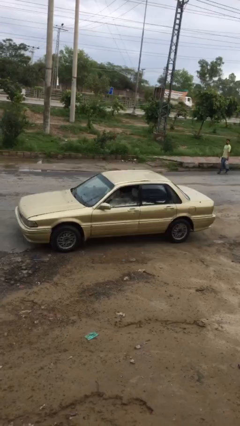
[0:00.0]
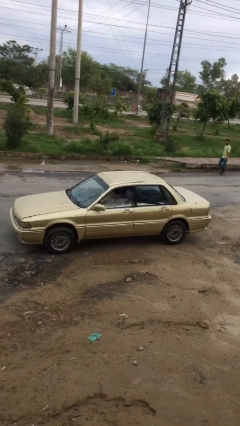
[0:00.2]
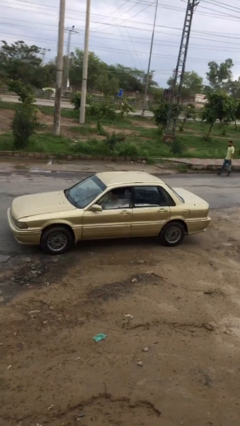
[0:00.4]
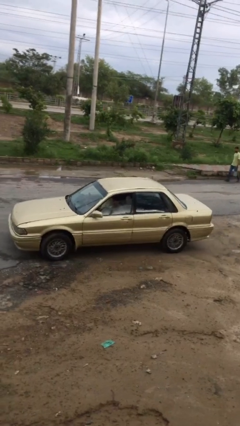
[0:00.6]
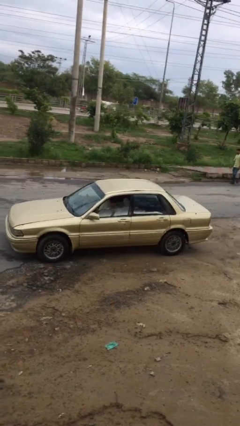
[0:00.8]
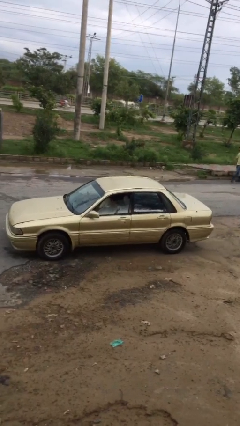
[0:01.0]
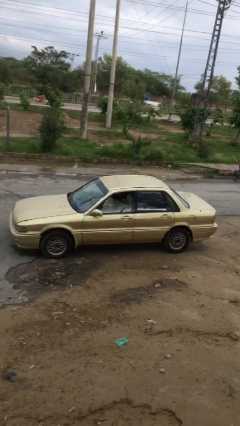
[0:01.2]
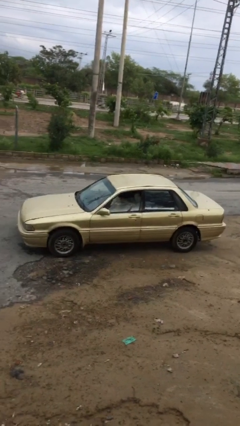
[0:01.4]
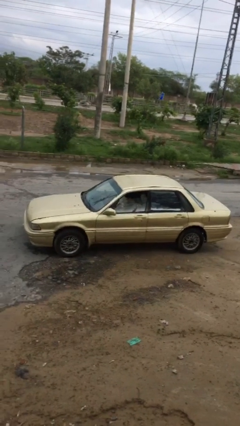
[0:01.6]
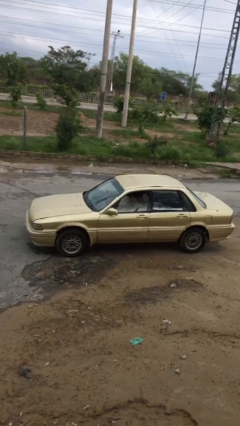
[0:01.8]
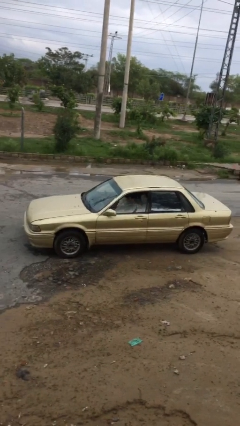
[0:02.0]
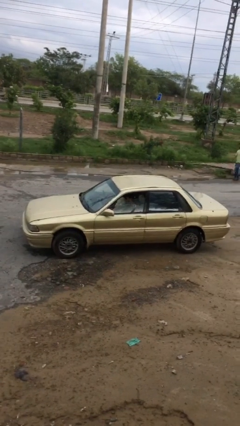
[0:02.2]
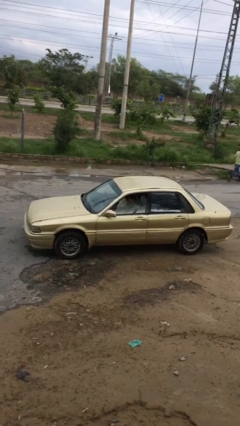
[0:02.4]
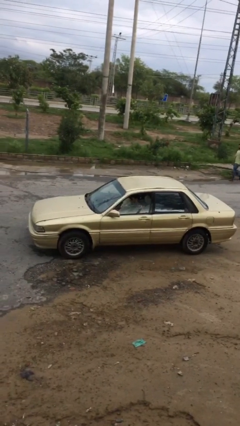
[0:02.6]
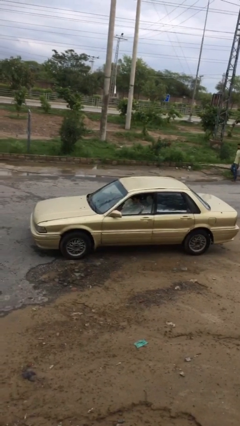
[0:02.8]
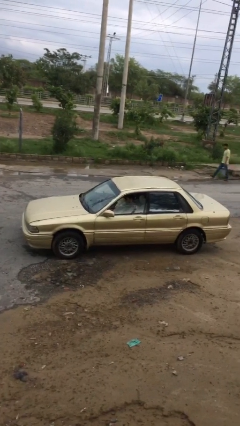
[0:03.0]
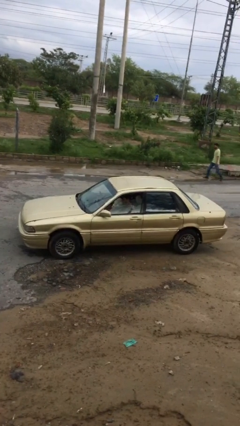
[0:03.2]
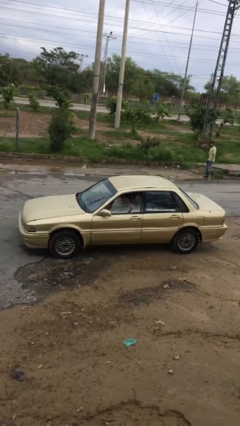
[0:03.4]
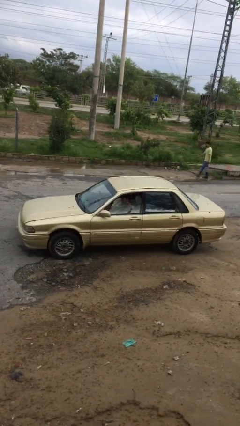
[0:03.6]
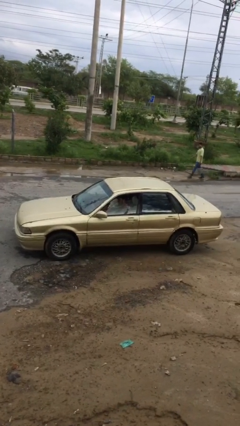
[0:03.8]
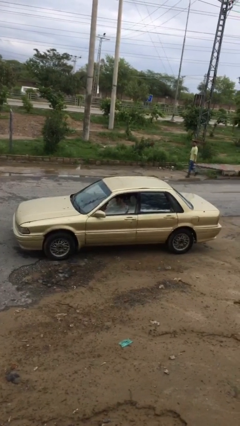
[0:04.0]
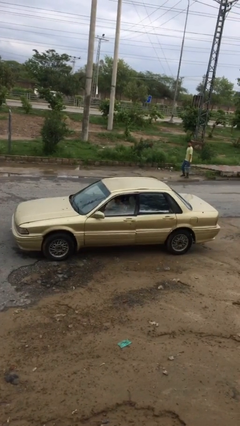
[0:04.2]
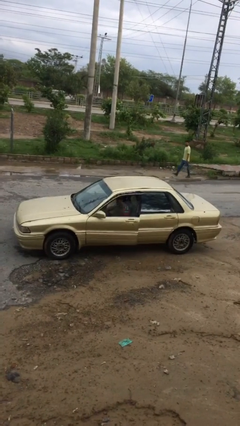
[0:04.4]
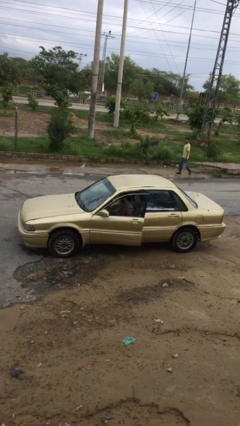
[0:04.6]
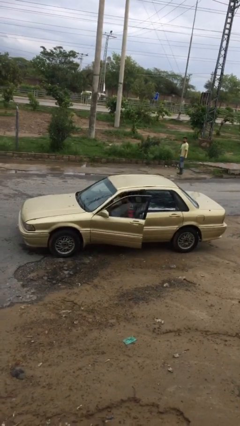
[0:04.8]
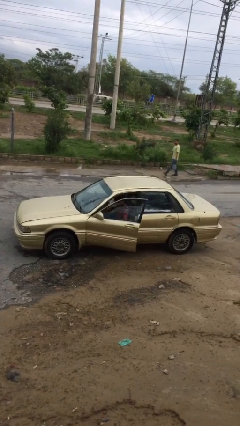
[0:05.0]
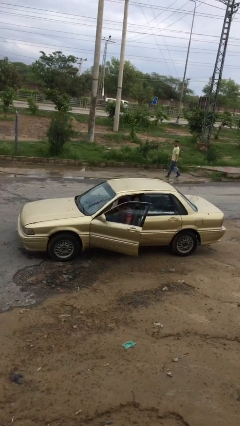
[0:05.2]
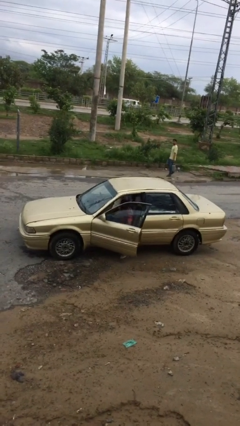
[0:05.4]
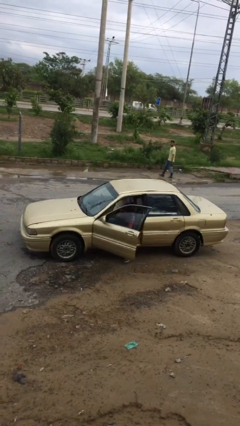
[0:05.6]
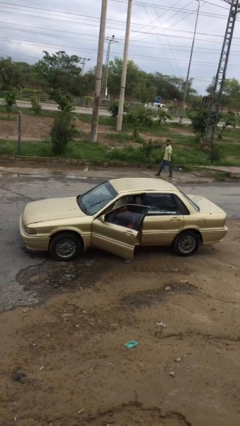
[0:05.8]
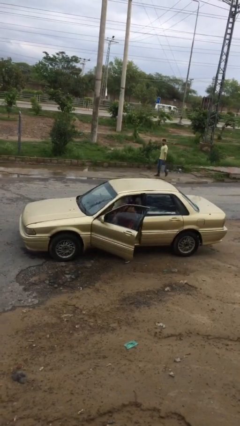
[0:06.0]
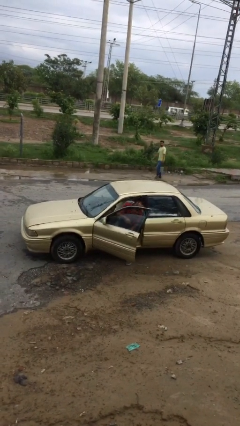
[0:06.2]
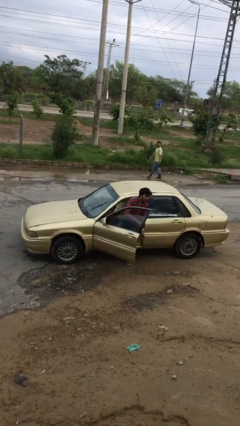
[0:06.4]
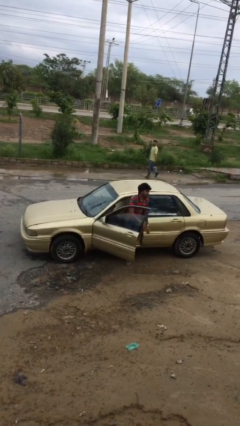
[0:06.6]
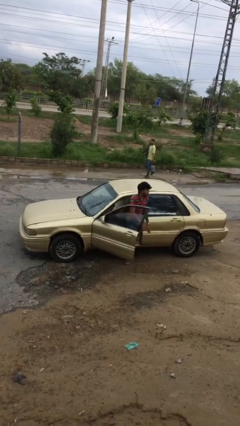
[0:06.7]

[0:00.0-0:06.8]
car drops off person

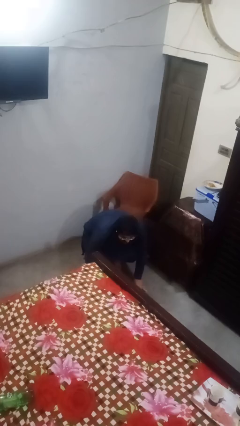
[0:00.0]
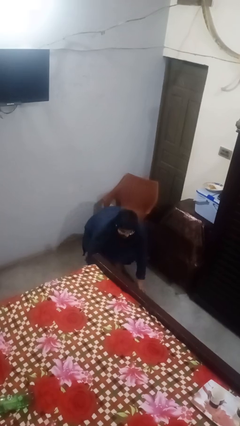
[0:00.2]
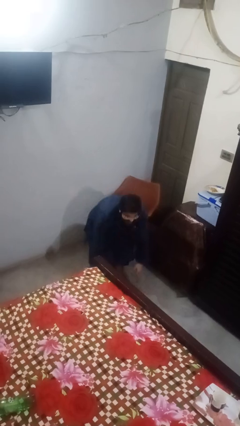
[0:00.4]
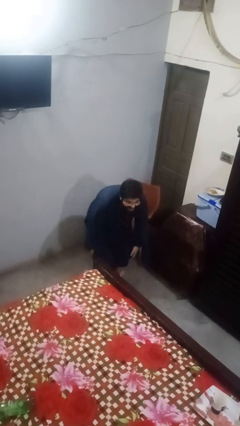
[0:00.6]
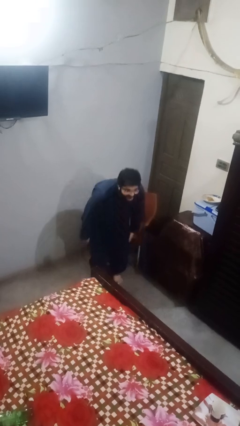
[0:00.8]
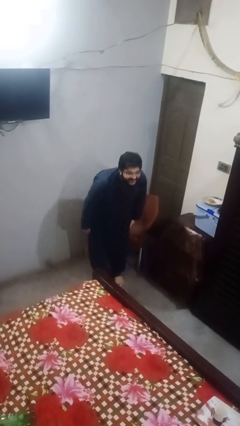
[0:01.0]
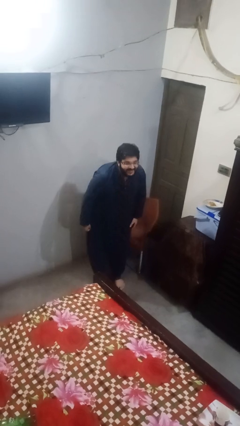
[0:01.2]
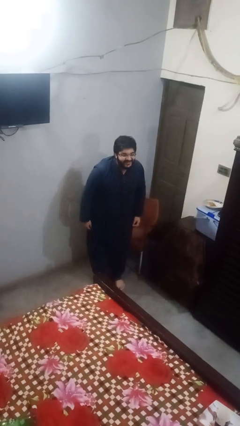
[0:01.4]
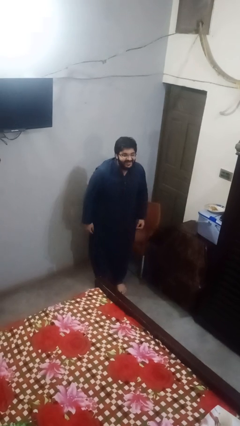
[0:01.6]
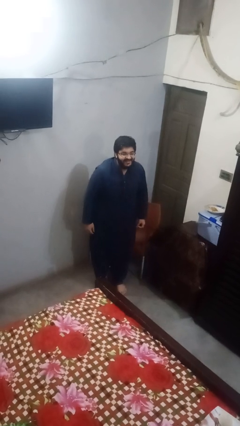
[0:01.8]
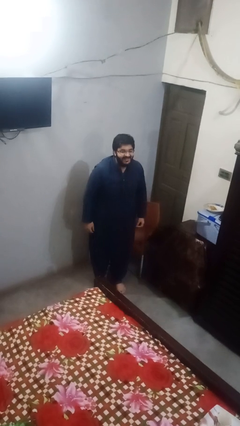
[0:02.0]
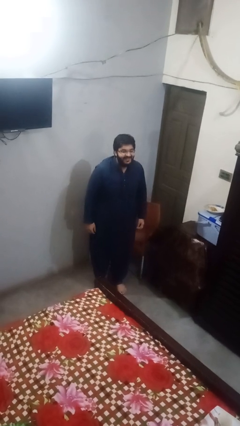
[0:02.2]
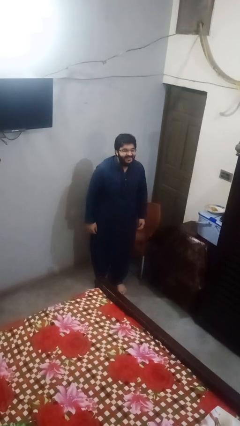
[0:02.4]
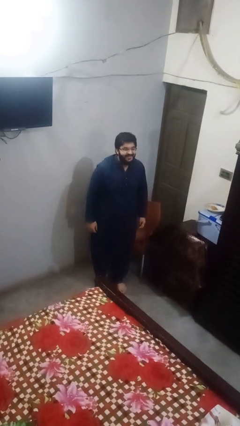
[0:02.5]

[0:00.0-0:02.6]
person stands up from floor

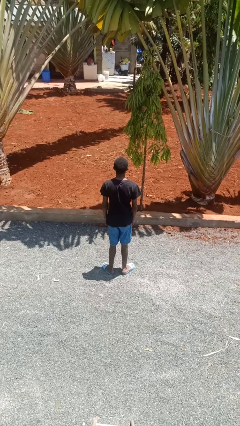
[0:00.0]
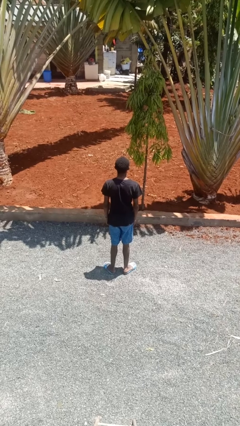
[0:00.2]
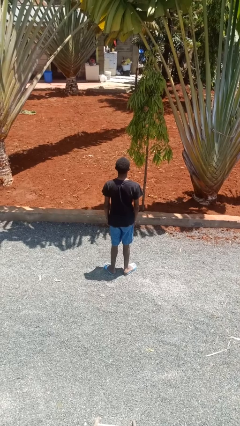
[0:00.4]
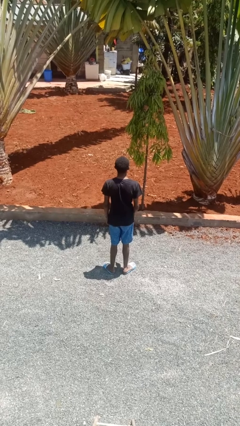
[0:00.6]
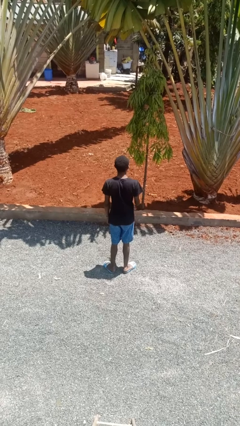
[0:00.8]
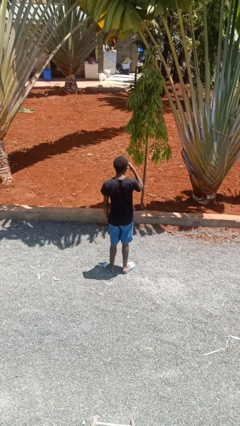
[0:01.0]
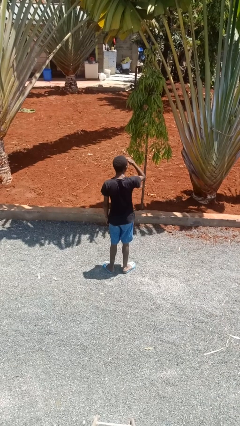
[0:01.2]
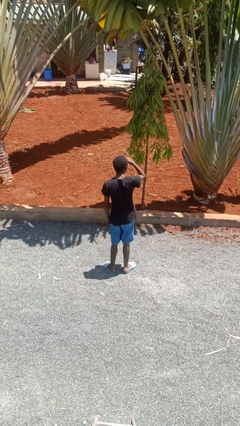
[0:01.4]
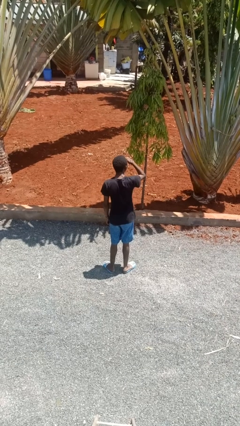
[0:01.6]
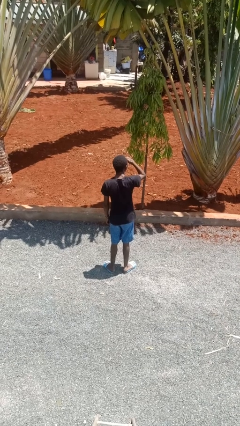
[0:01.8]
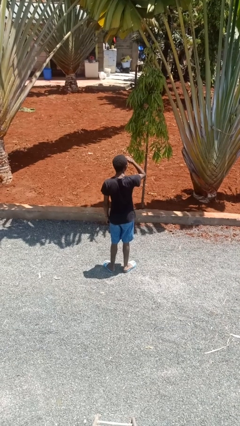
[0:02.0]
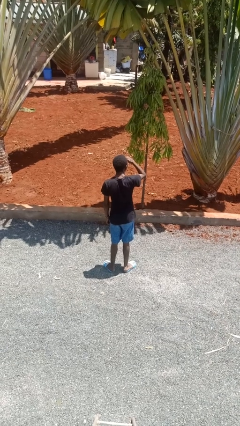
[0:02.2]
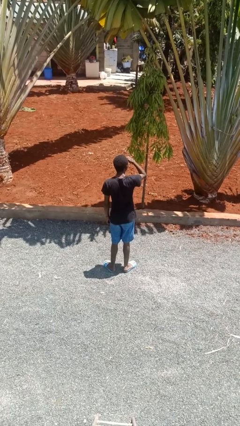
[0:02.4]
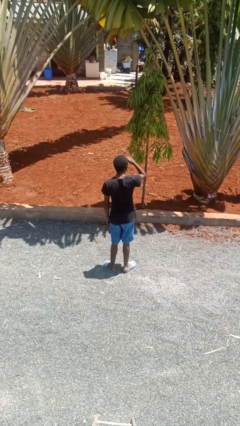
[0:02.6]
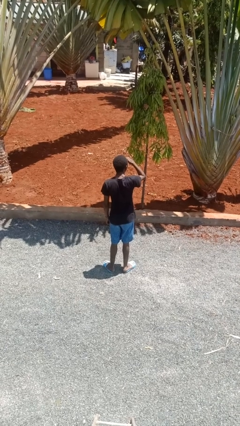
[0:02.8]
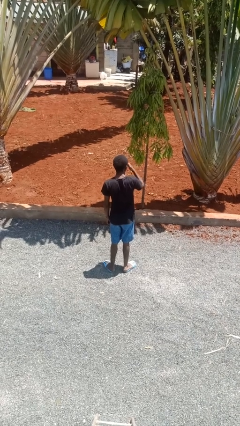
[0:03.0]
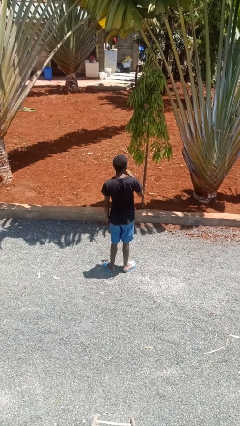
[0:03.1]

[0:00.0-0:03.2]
person shades eyes

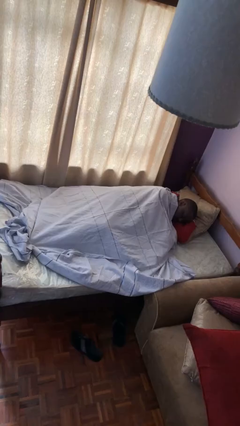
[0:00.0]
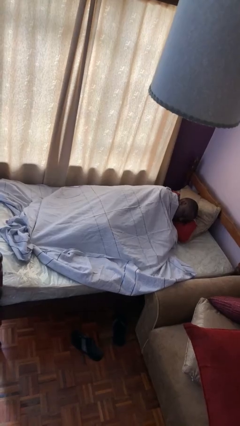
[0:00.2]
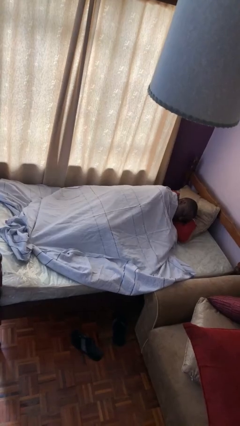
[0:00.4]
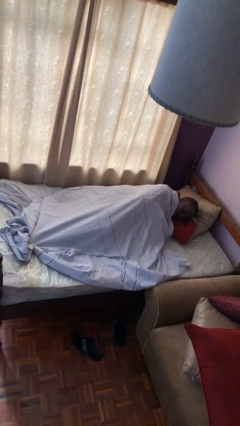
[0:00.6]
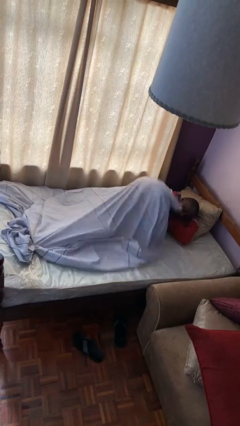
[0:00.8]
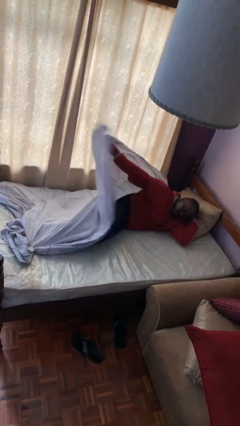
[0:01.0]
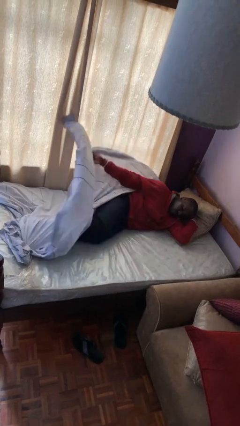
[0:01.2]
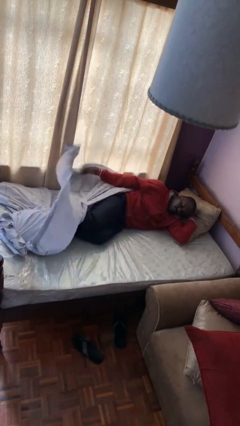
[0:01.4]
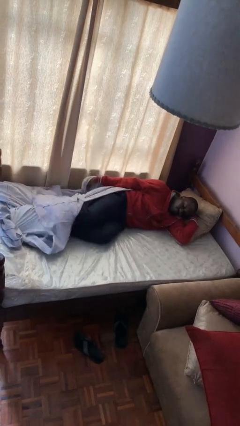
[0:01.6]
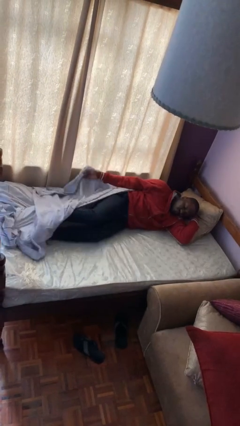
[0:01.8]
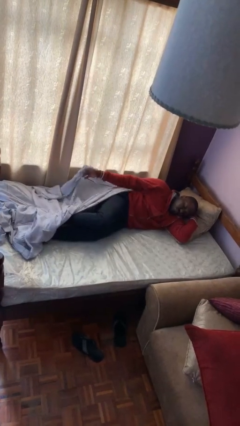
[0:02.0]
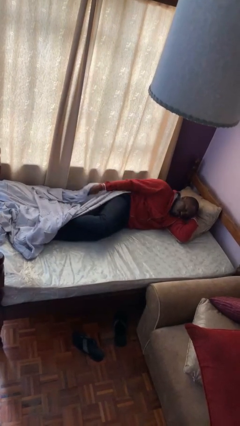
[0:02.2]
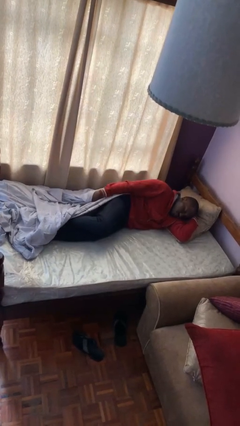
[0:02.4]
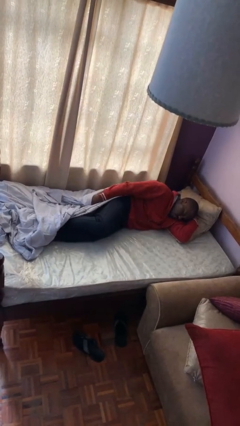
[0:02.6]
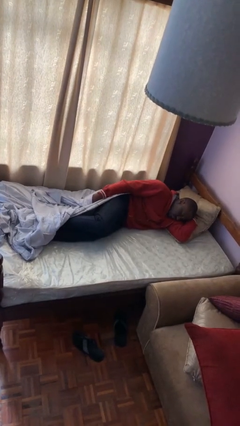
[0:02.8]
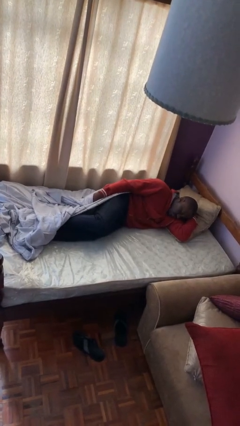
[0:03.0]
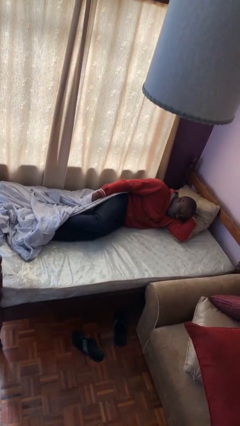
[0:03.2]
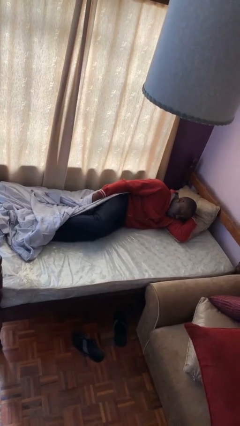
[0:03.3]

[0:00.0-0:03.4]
person uncovers with bedsheets

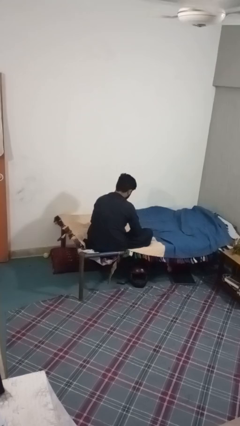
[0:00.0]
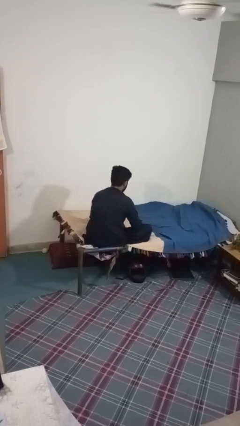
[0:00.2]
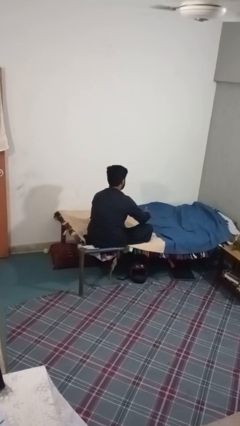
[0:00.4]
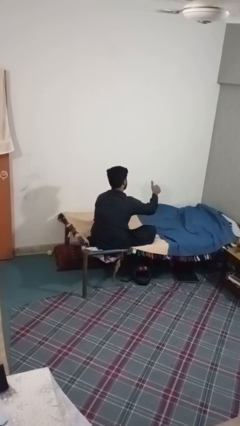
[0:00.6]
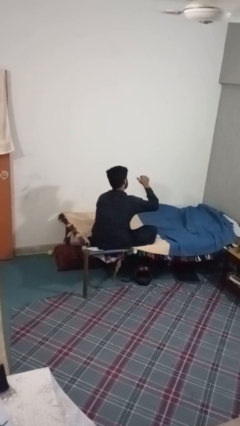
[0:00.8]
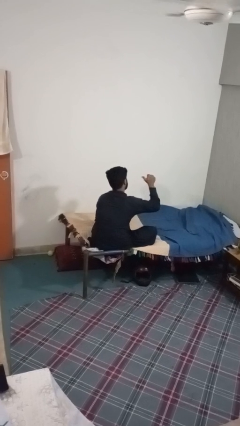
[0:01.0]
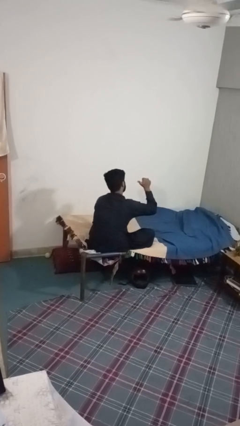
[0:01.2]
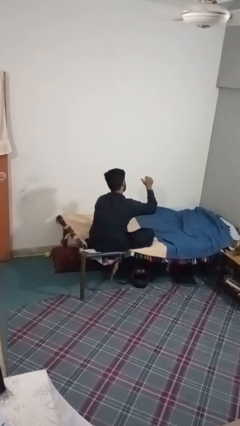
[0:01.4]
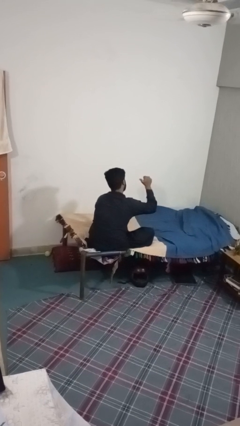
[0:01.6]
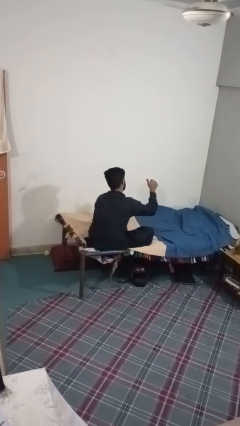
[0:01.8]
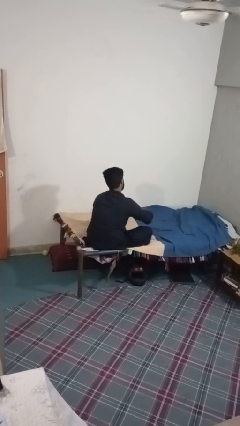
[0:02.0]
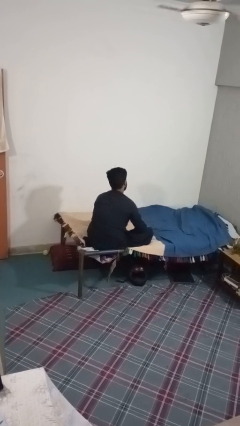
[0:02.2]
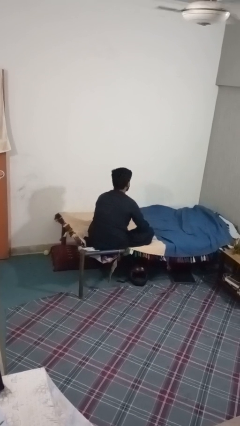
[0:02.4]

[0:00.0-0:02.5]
person gestures behind me
